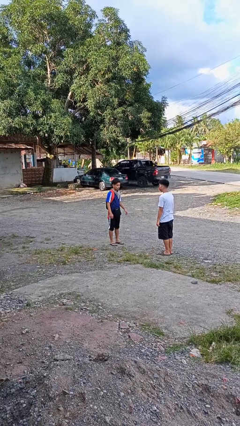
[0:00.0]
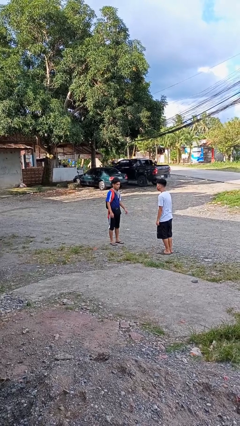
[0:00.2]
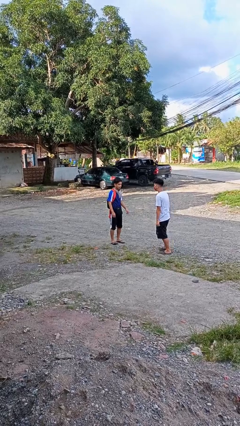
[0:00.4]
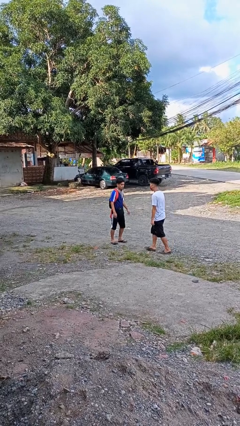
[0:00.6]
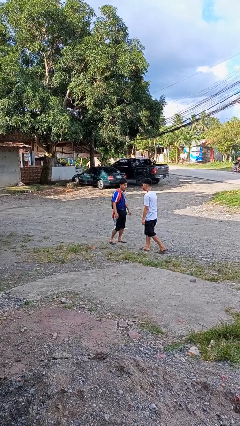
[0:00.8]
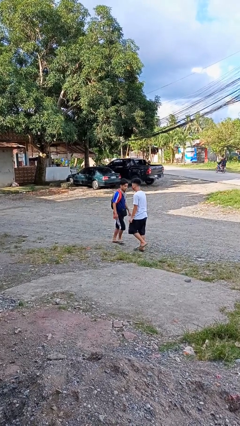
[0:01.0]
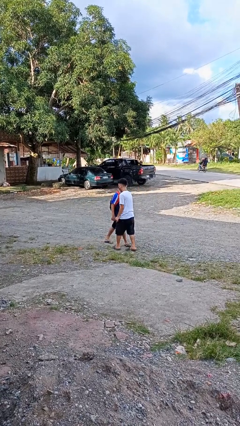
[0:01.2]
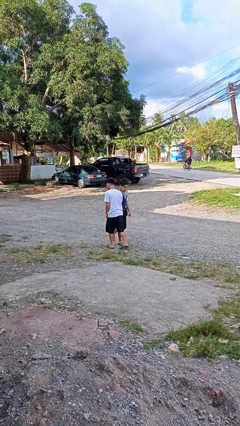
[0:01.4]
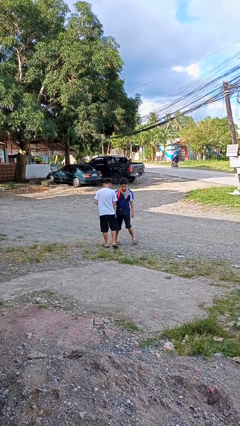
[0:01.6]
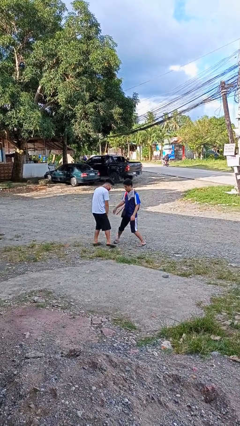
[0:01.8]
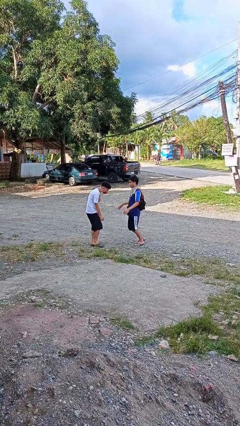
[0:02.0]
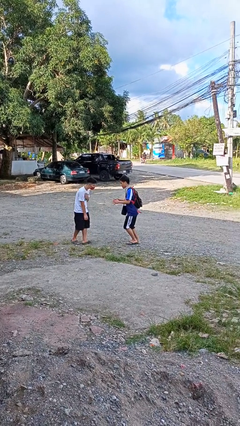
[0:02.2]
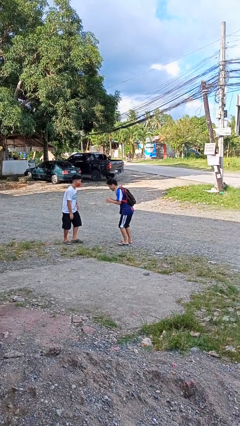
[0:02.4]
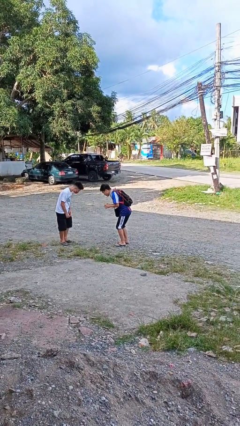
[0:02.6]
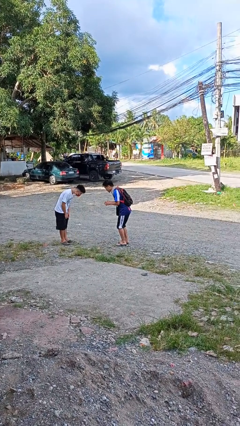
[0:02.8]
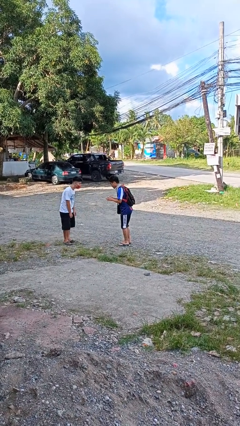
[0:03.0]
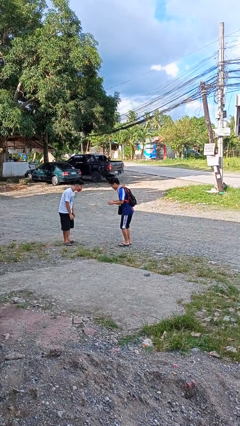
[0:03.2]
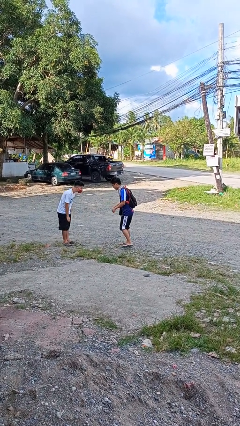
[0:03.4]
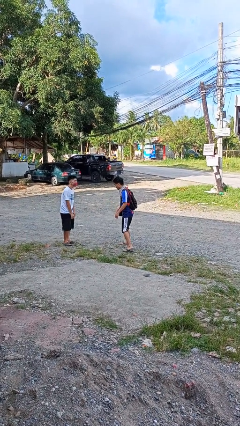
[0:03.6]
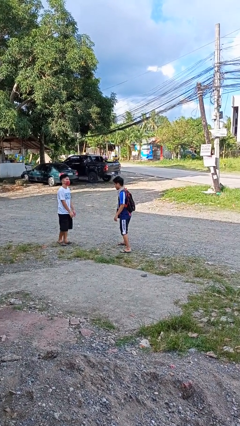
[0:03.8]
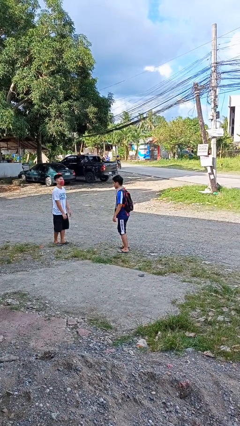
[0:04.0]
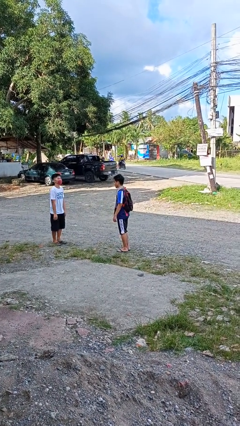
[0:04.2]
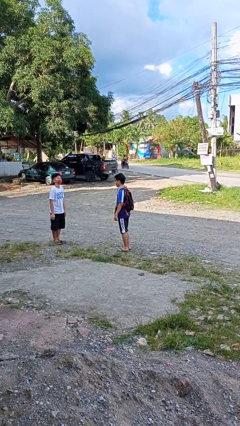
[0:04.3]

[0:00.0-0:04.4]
person bumps into person

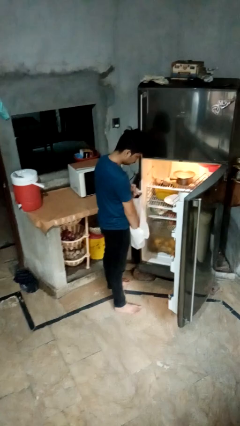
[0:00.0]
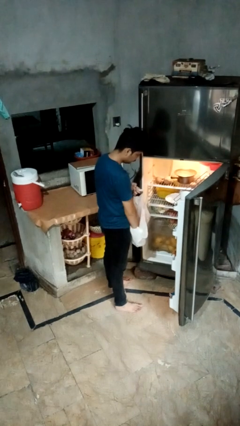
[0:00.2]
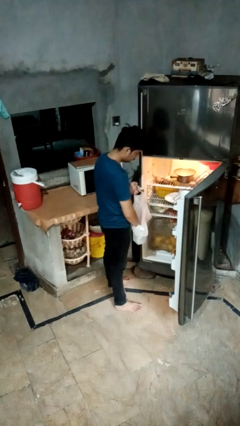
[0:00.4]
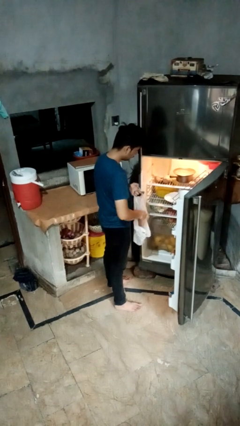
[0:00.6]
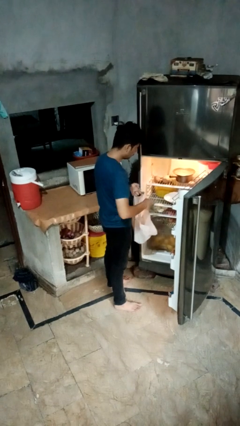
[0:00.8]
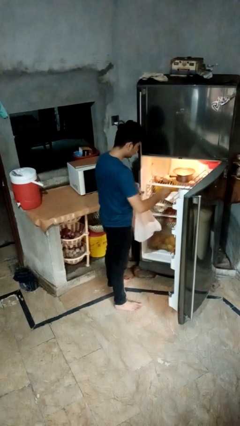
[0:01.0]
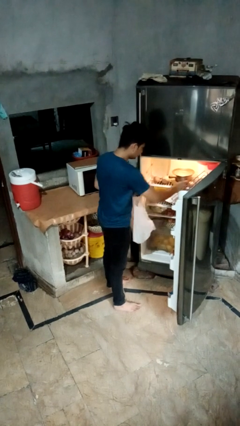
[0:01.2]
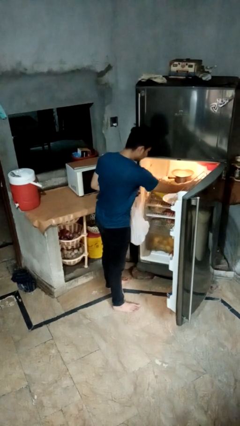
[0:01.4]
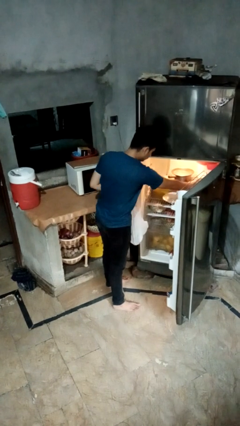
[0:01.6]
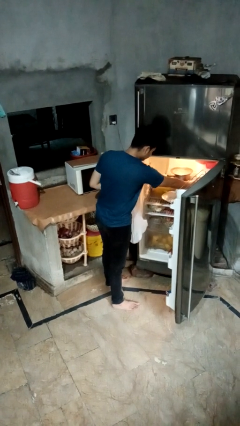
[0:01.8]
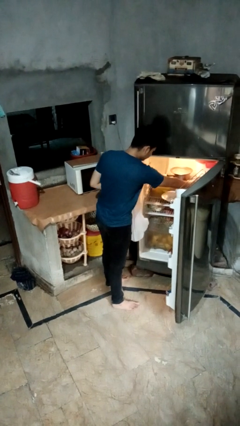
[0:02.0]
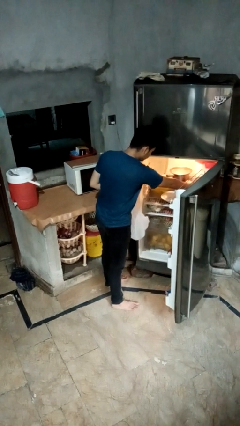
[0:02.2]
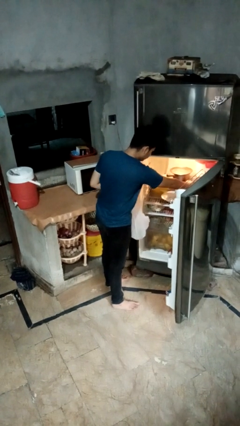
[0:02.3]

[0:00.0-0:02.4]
person loads groceries into refrigerator

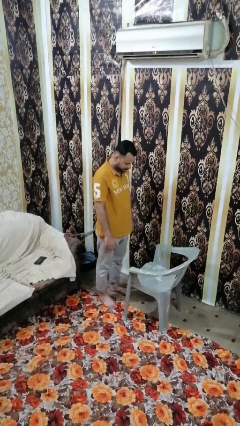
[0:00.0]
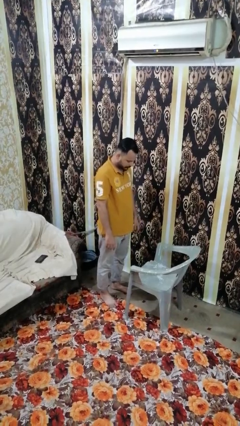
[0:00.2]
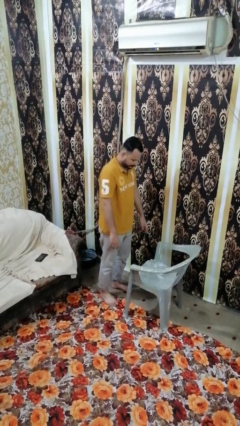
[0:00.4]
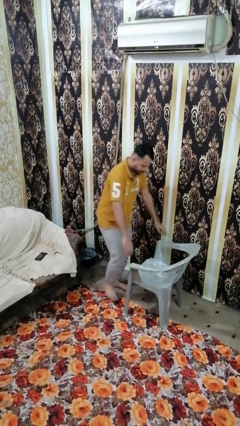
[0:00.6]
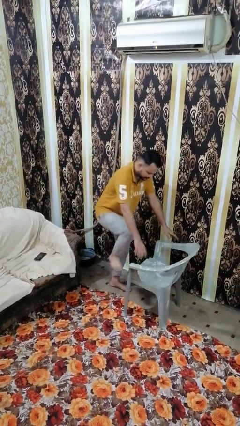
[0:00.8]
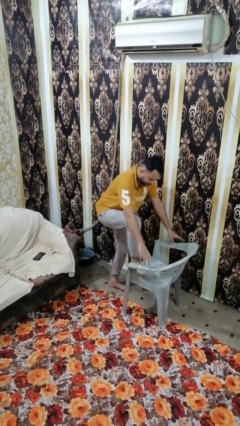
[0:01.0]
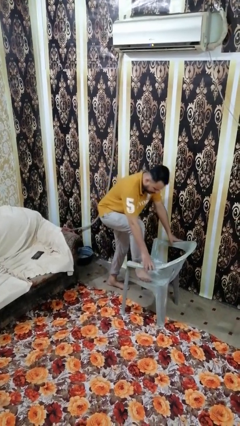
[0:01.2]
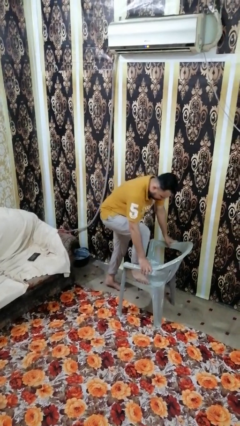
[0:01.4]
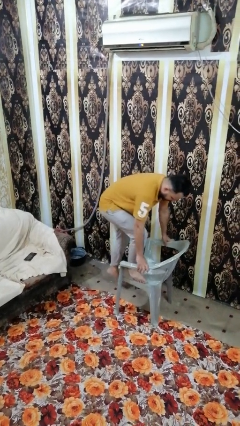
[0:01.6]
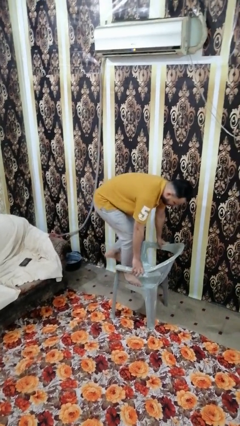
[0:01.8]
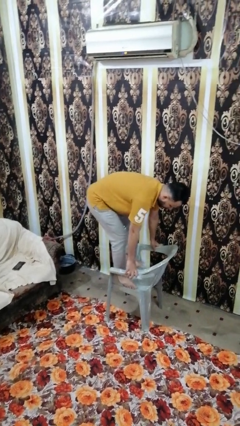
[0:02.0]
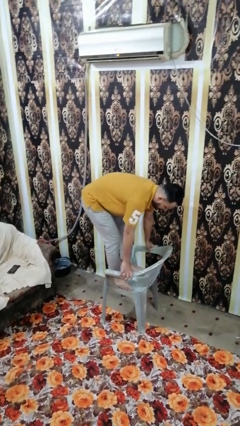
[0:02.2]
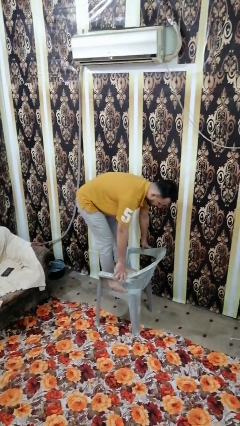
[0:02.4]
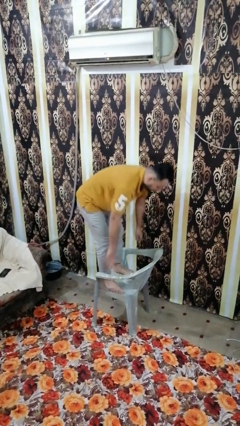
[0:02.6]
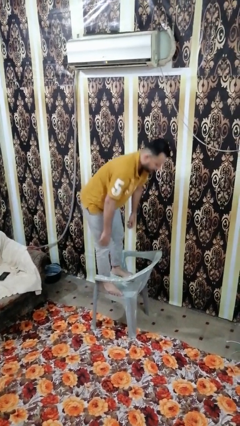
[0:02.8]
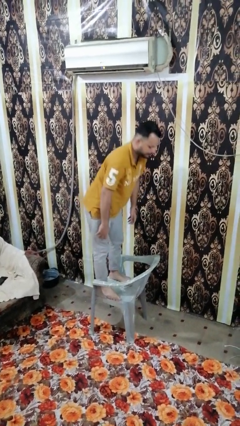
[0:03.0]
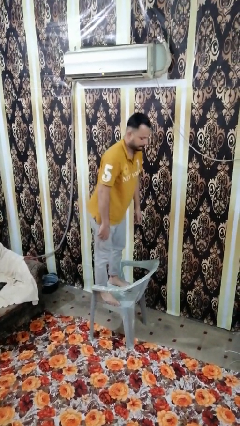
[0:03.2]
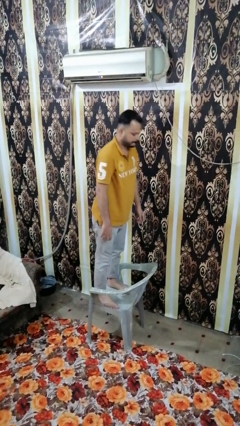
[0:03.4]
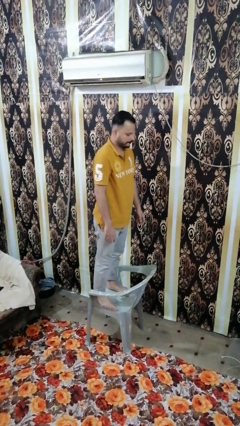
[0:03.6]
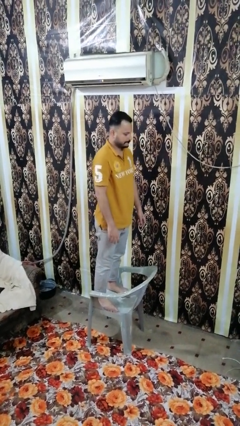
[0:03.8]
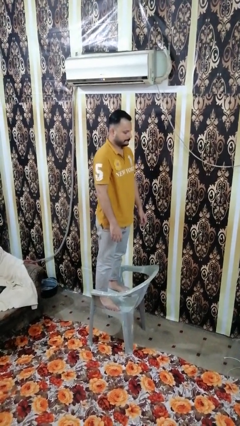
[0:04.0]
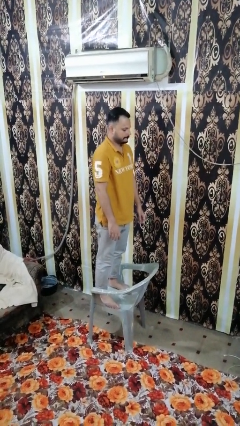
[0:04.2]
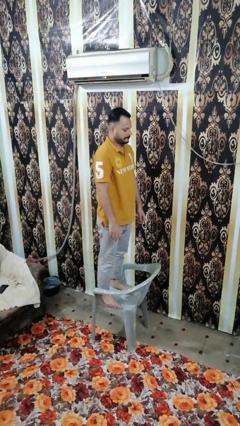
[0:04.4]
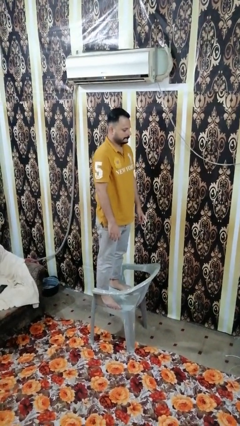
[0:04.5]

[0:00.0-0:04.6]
person climbs on chair

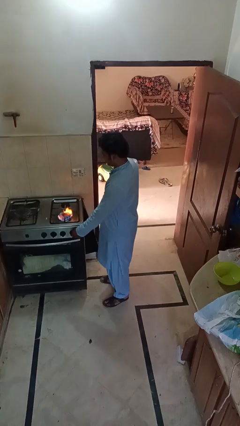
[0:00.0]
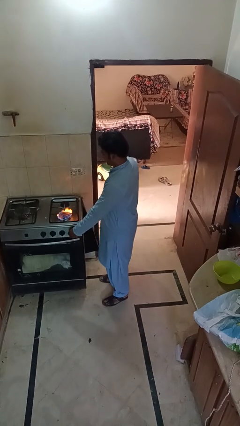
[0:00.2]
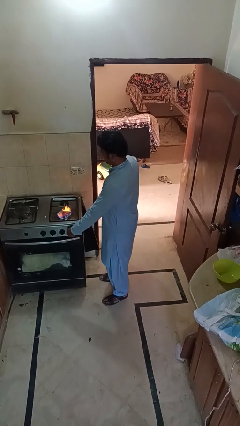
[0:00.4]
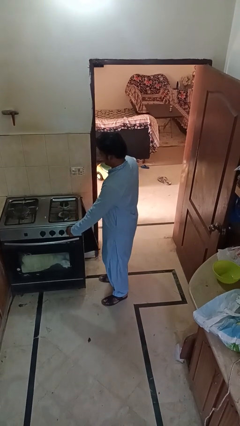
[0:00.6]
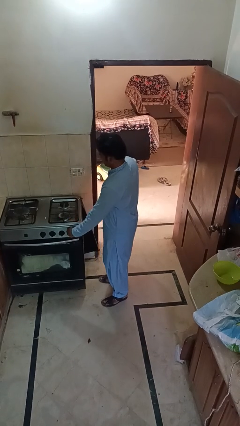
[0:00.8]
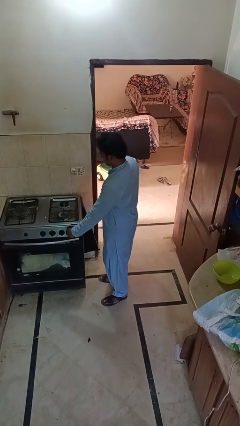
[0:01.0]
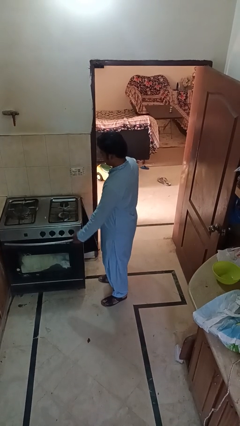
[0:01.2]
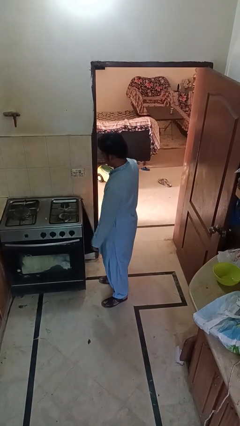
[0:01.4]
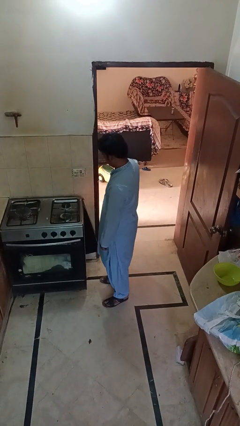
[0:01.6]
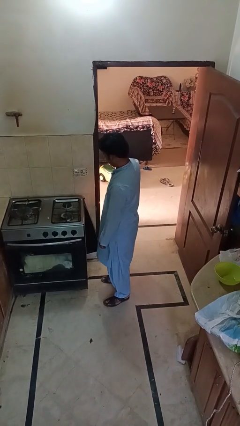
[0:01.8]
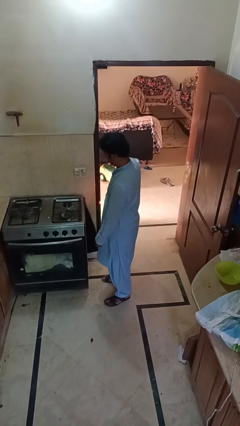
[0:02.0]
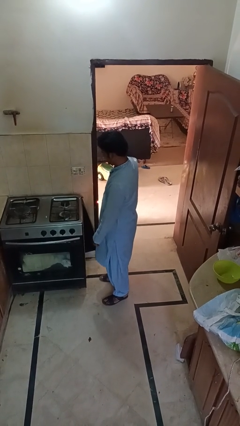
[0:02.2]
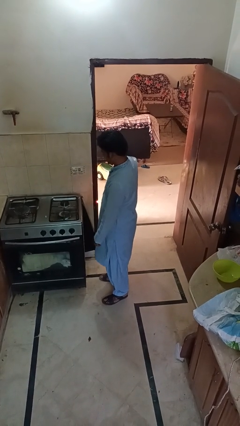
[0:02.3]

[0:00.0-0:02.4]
person turns off stovetop

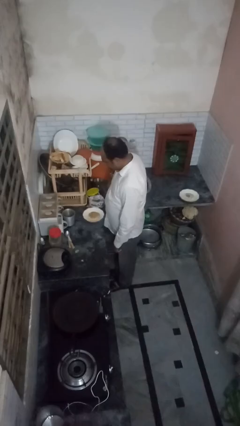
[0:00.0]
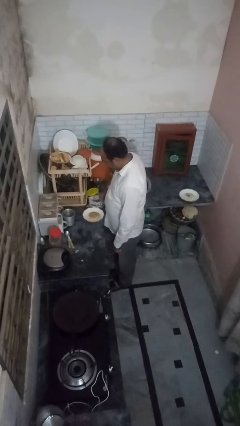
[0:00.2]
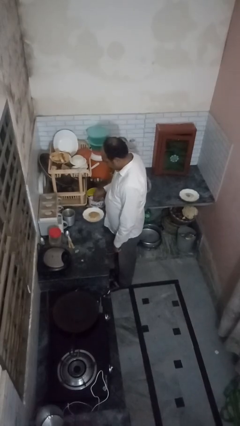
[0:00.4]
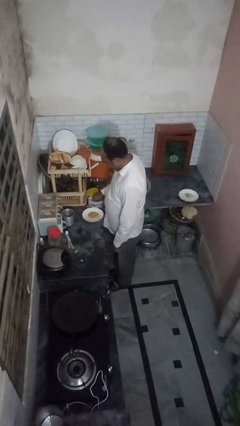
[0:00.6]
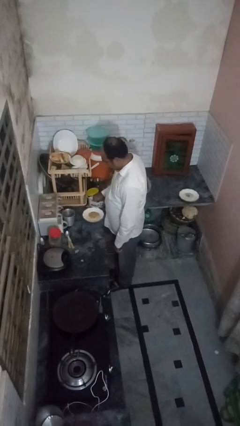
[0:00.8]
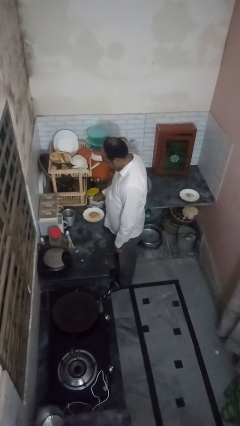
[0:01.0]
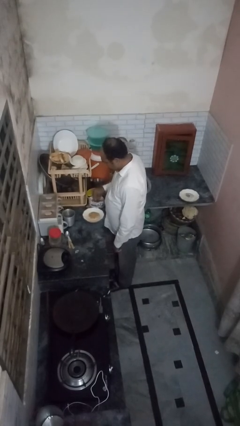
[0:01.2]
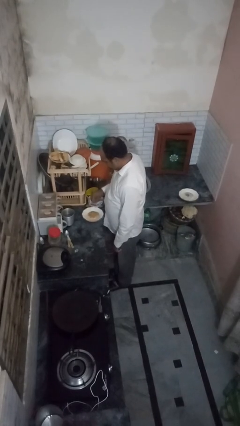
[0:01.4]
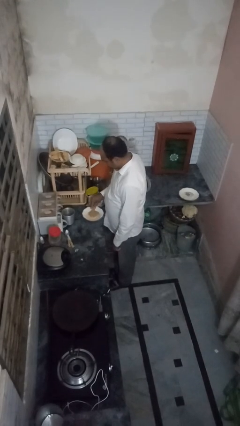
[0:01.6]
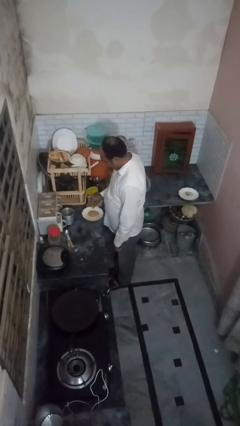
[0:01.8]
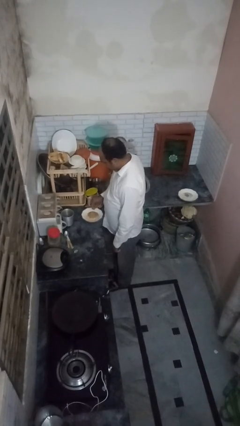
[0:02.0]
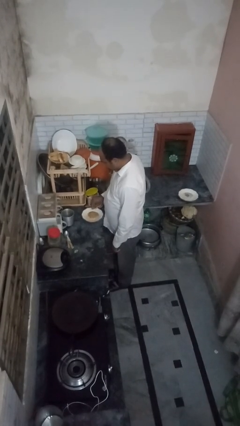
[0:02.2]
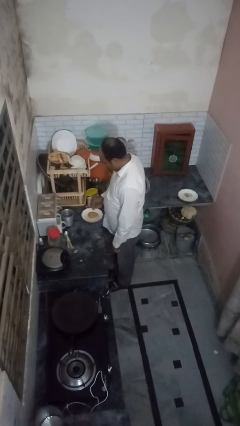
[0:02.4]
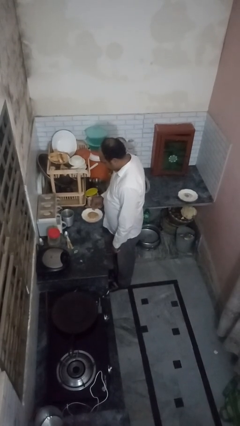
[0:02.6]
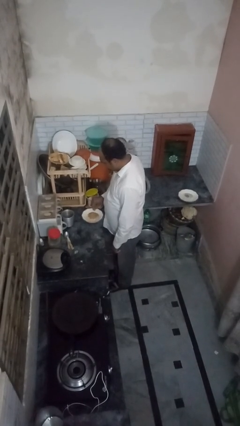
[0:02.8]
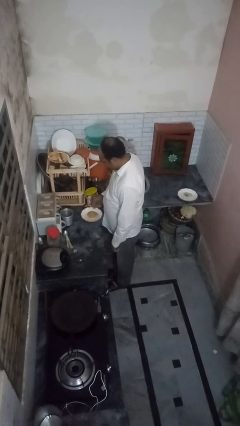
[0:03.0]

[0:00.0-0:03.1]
person pours into bowl

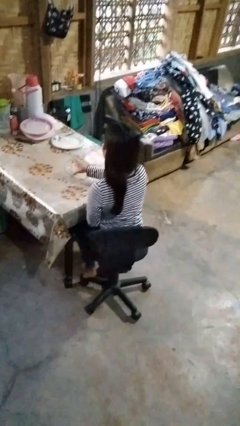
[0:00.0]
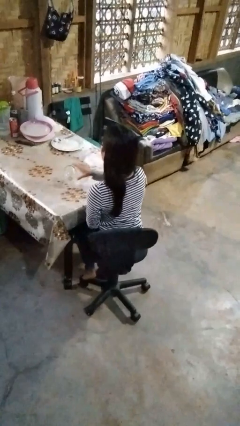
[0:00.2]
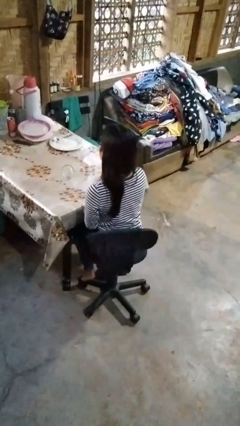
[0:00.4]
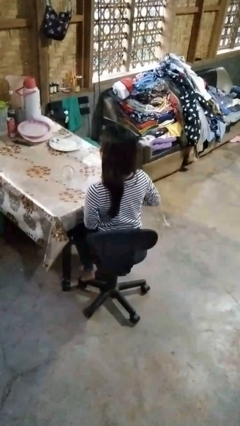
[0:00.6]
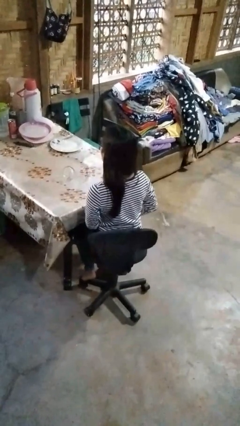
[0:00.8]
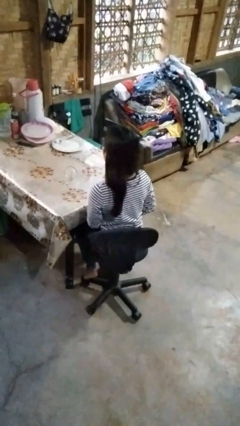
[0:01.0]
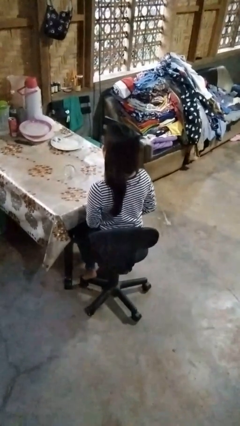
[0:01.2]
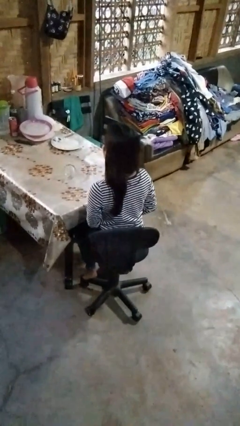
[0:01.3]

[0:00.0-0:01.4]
person knocks over glass
